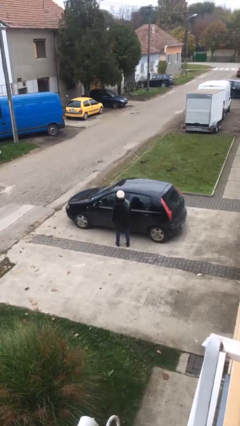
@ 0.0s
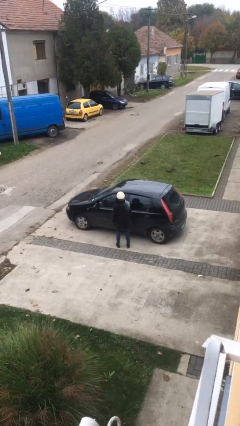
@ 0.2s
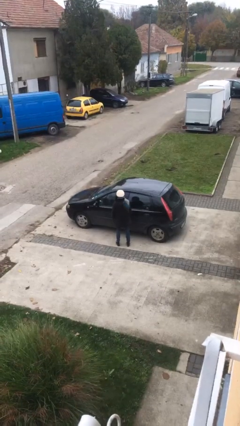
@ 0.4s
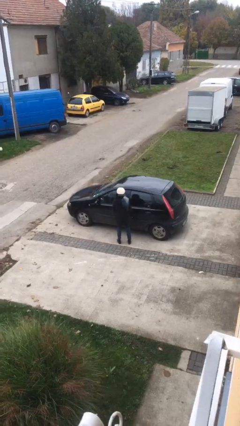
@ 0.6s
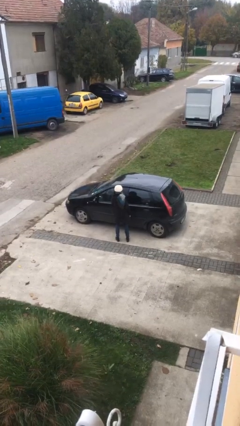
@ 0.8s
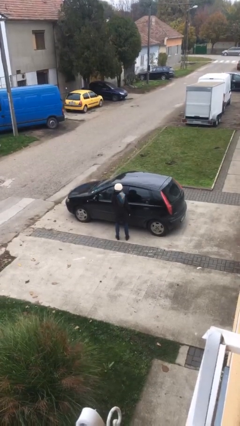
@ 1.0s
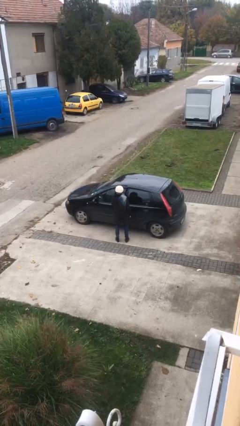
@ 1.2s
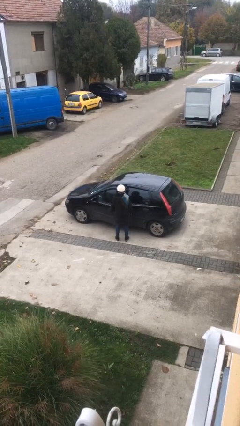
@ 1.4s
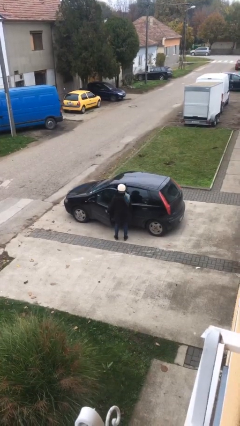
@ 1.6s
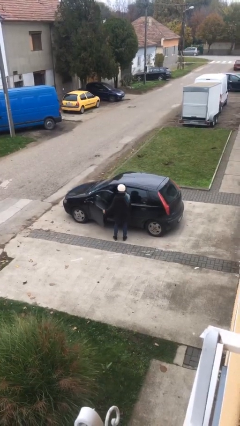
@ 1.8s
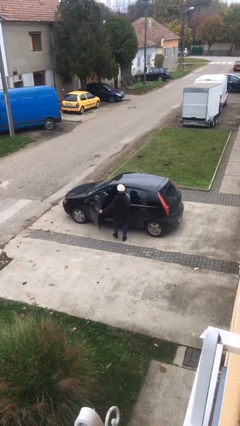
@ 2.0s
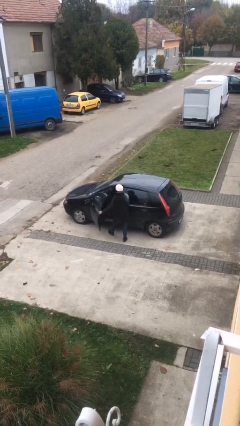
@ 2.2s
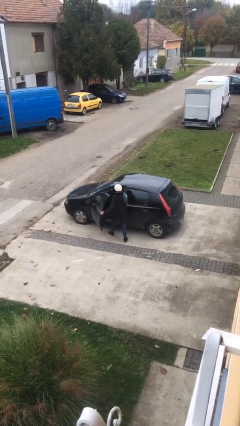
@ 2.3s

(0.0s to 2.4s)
person opens car door

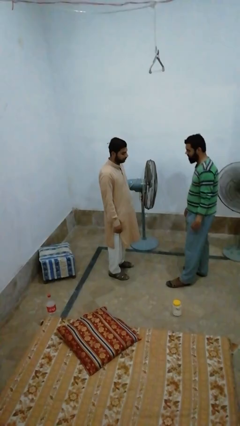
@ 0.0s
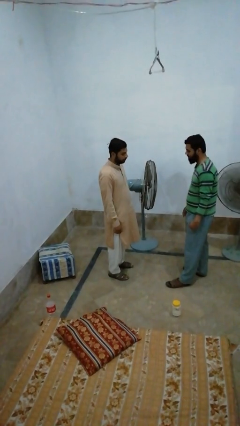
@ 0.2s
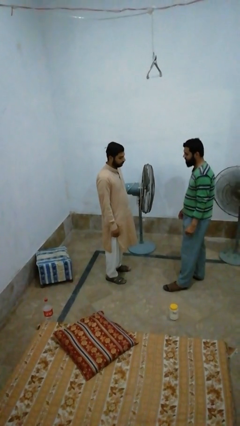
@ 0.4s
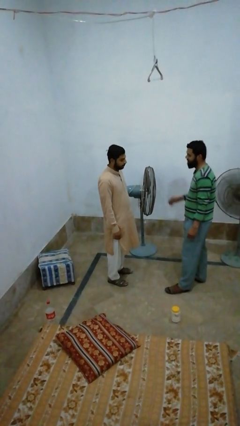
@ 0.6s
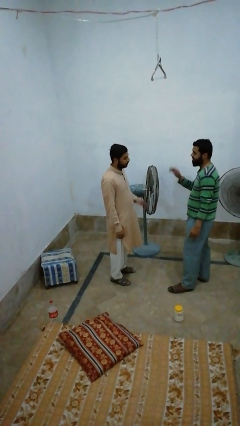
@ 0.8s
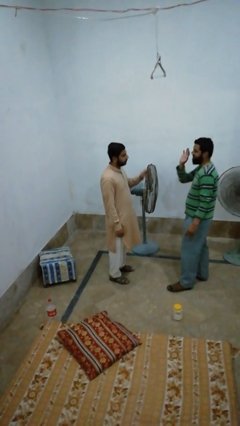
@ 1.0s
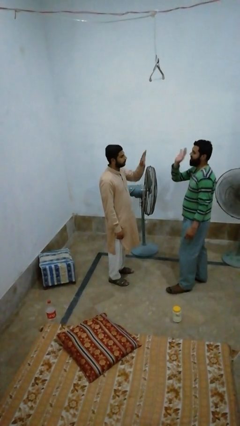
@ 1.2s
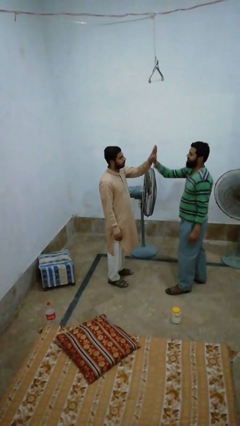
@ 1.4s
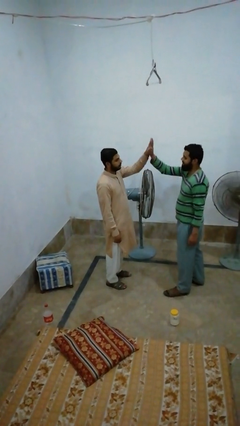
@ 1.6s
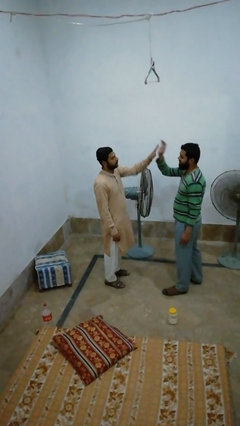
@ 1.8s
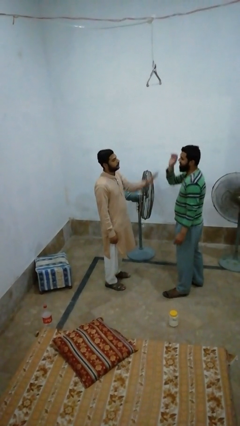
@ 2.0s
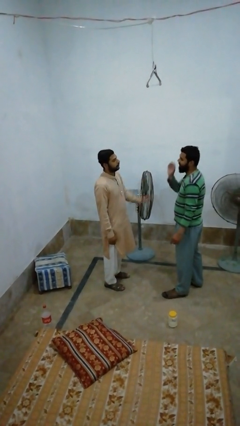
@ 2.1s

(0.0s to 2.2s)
person highfives hand

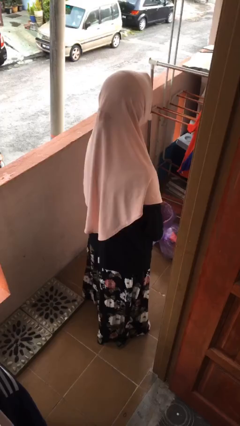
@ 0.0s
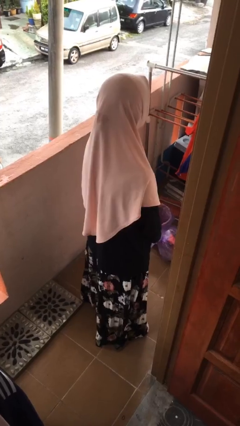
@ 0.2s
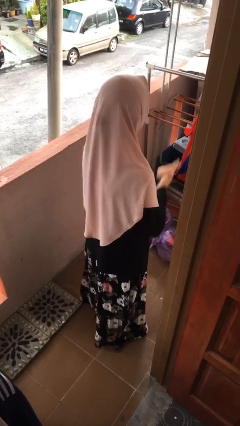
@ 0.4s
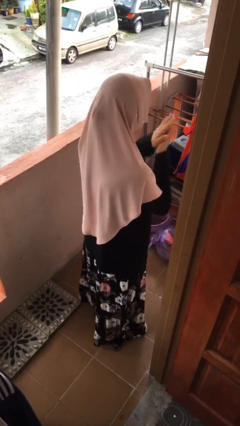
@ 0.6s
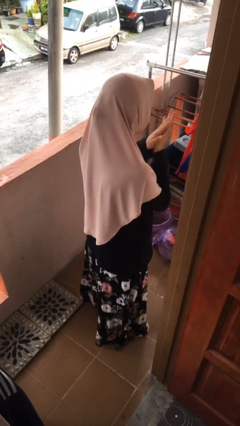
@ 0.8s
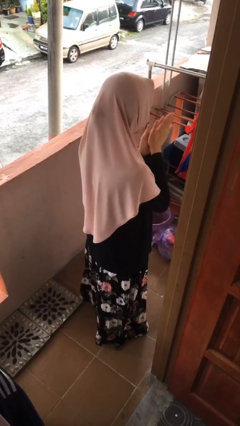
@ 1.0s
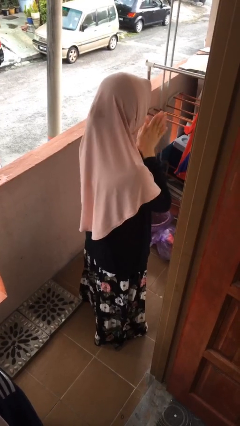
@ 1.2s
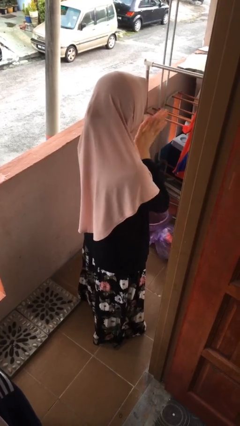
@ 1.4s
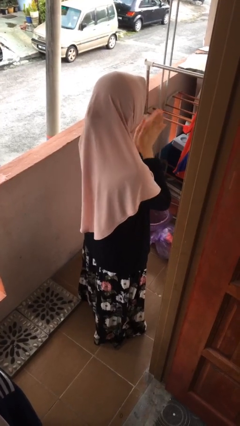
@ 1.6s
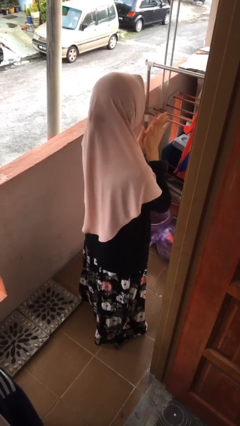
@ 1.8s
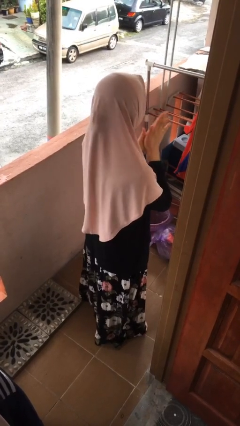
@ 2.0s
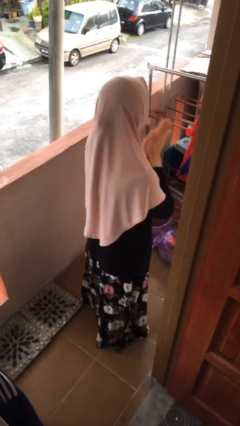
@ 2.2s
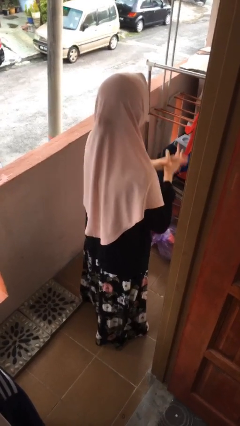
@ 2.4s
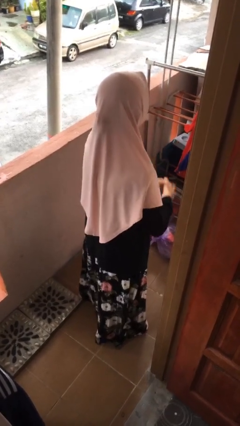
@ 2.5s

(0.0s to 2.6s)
person blows into hands

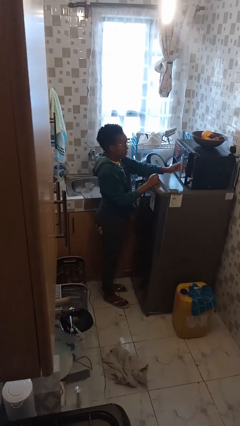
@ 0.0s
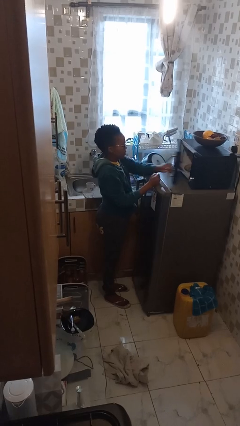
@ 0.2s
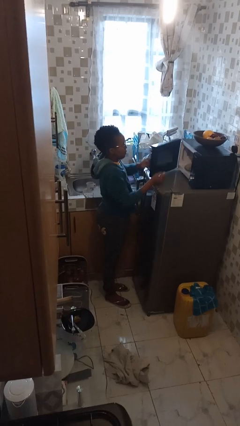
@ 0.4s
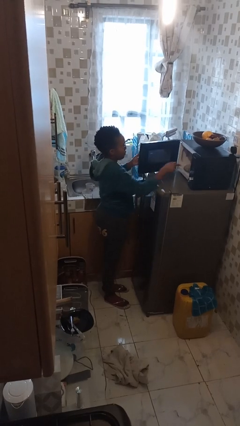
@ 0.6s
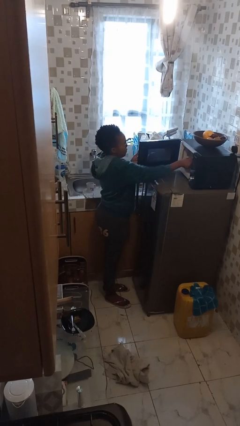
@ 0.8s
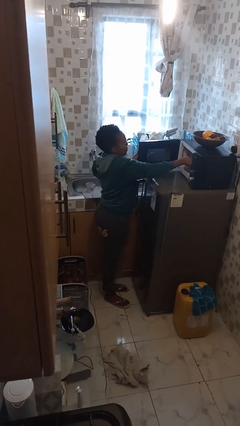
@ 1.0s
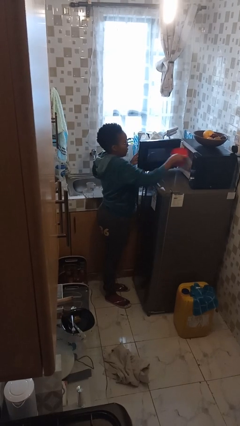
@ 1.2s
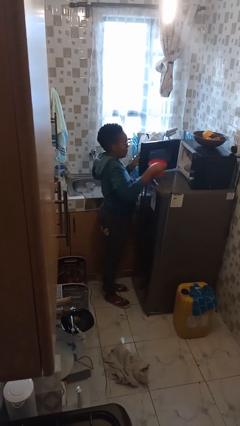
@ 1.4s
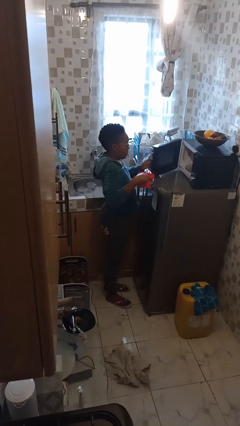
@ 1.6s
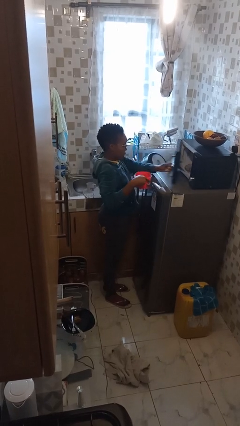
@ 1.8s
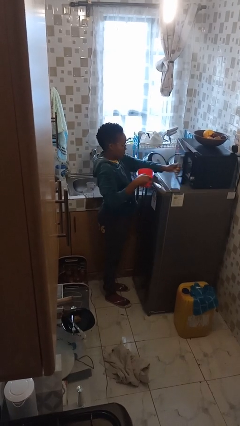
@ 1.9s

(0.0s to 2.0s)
person takes object from microwave

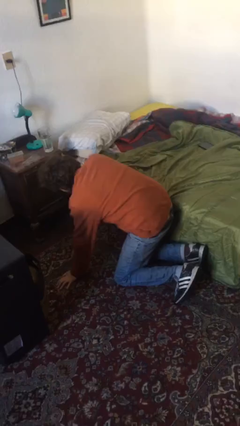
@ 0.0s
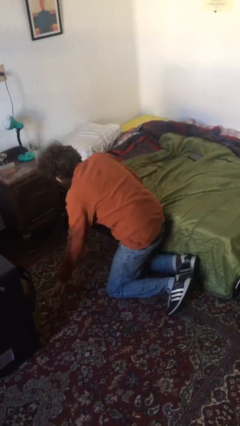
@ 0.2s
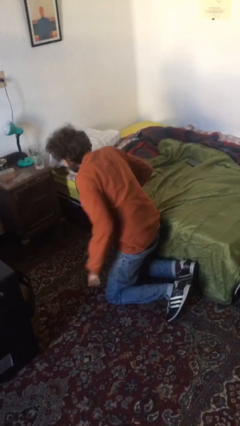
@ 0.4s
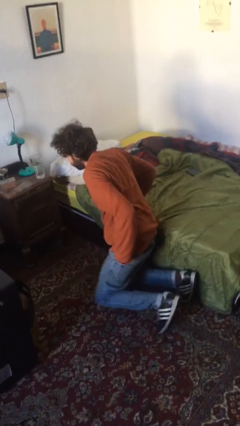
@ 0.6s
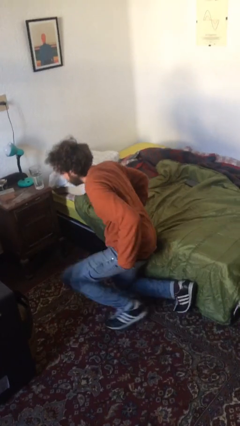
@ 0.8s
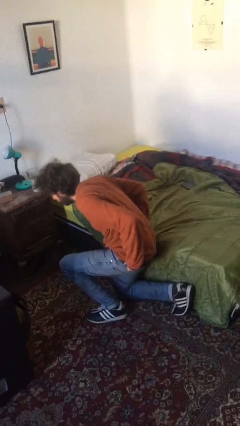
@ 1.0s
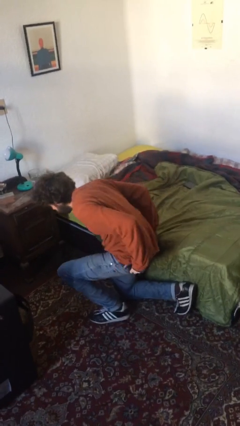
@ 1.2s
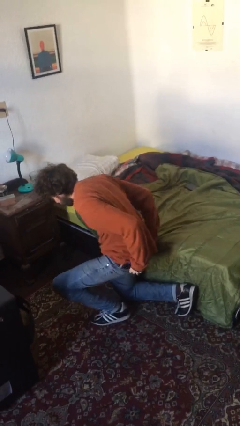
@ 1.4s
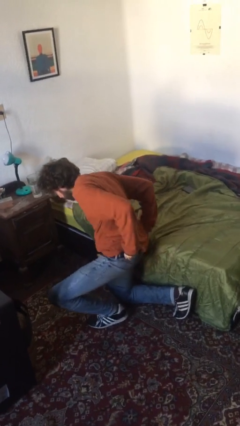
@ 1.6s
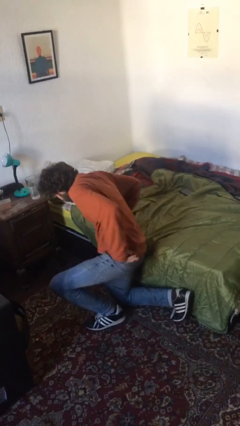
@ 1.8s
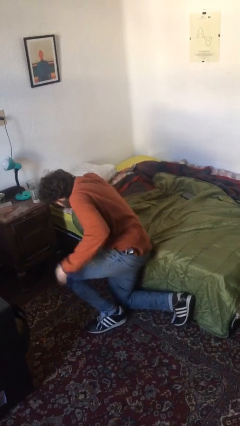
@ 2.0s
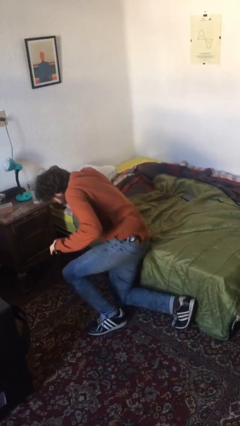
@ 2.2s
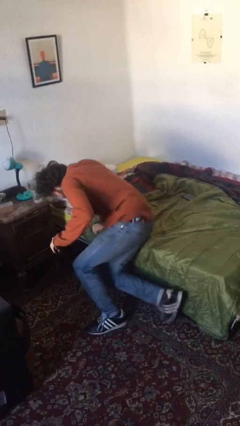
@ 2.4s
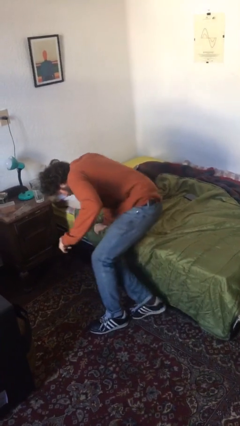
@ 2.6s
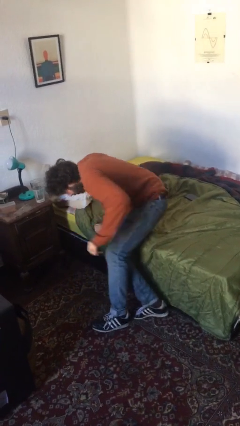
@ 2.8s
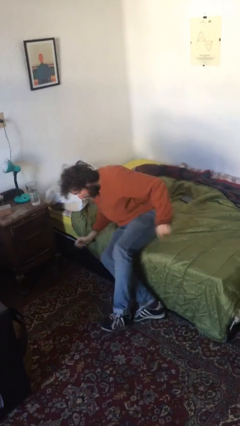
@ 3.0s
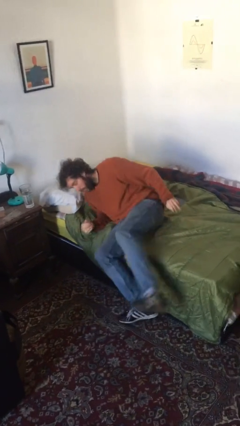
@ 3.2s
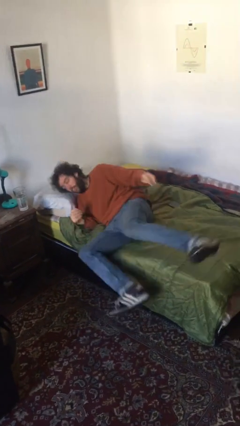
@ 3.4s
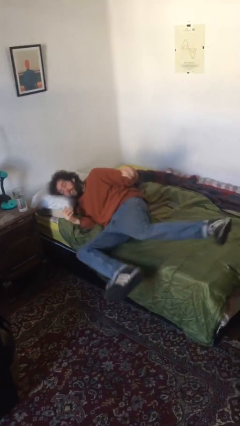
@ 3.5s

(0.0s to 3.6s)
person stands up from floor

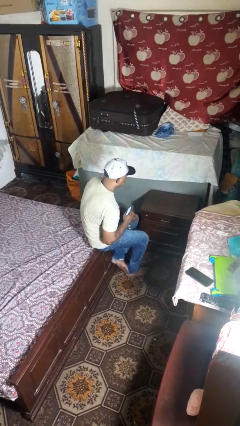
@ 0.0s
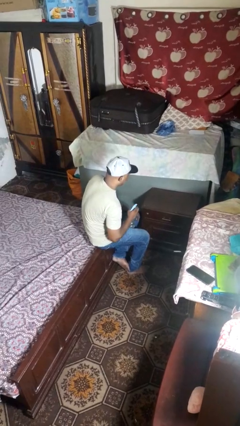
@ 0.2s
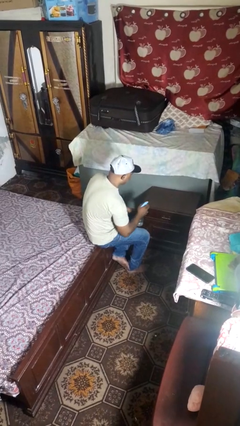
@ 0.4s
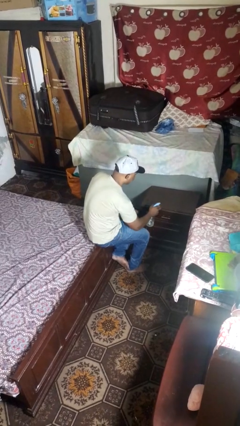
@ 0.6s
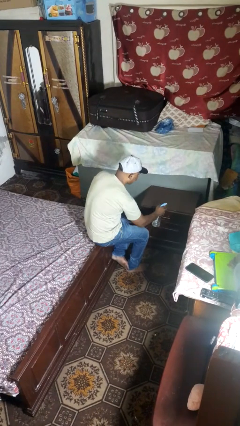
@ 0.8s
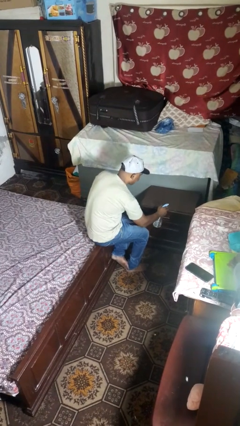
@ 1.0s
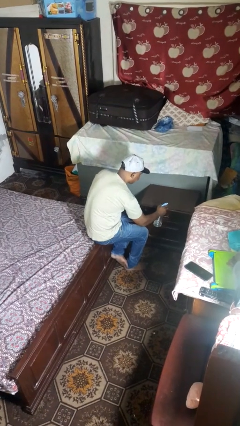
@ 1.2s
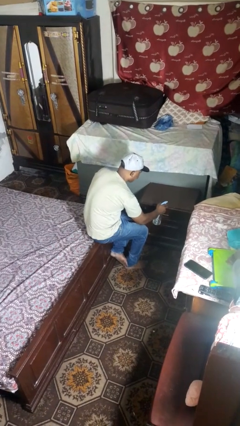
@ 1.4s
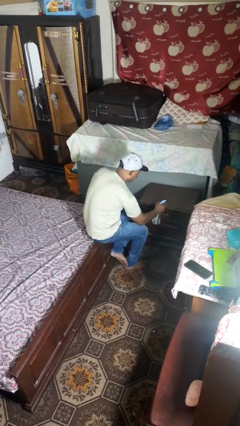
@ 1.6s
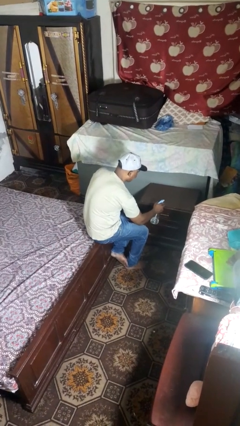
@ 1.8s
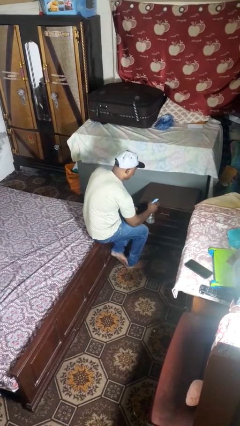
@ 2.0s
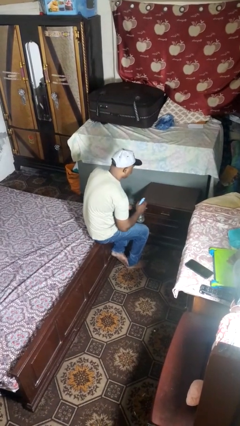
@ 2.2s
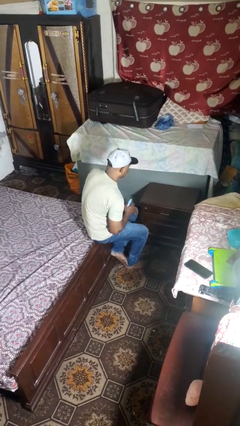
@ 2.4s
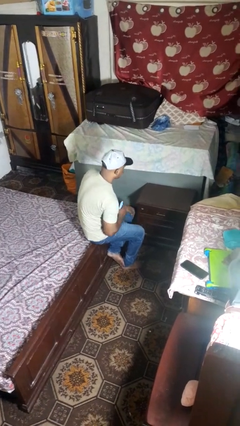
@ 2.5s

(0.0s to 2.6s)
person sprays from bottle

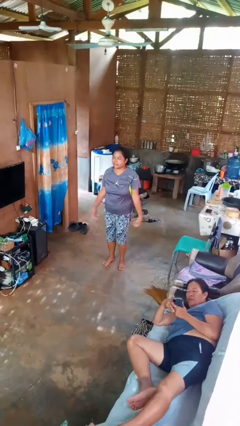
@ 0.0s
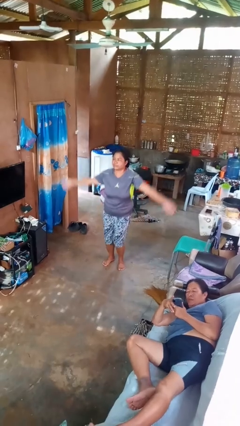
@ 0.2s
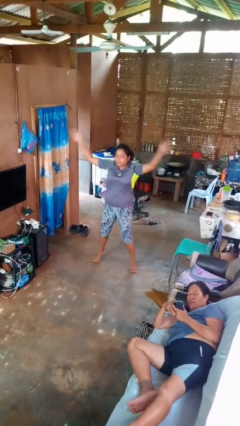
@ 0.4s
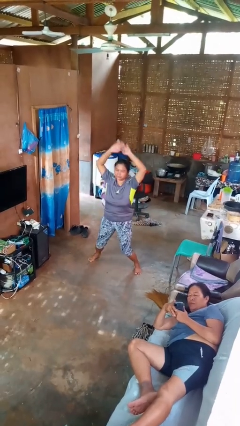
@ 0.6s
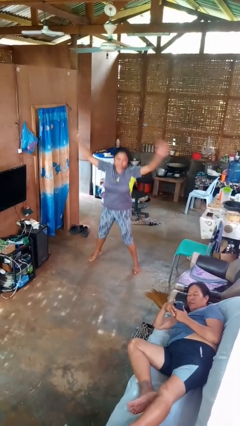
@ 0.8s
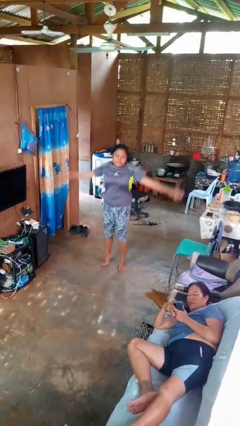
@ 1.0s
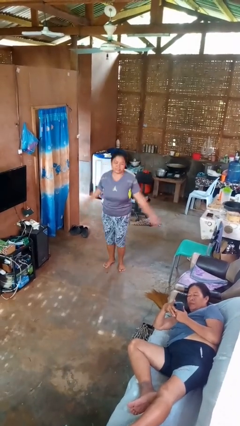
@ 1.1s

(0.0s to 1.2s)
person exercises with jumping jacks

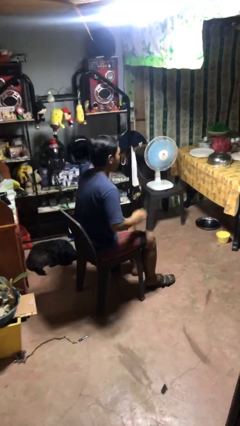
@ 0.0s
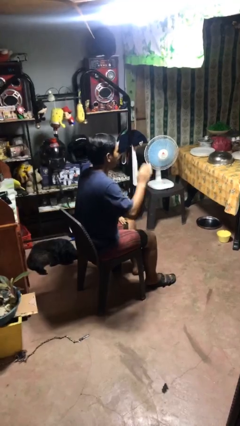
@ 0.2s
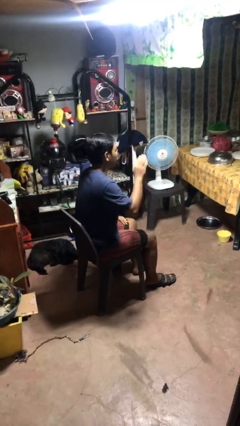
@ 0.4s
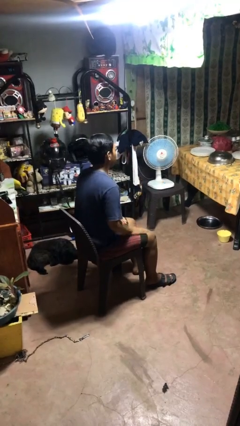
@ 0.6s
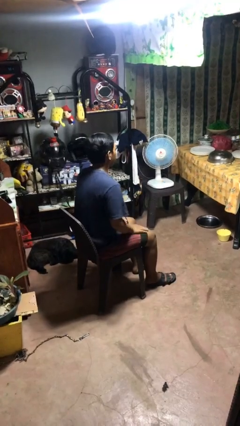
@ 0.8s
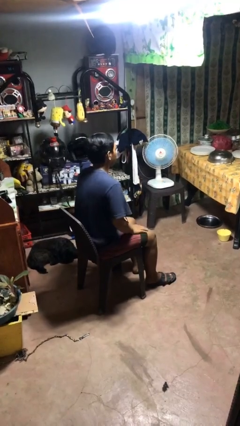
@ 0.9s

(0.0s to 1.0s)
person slaps hands on thighs
